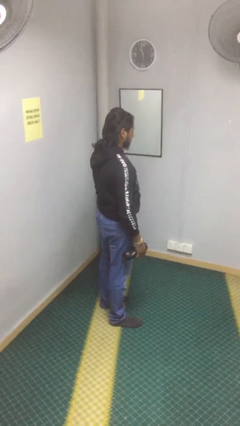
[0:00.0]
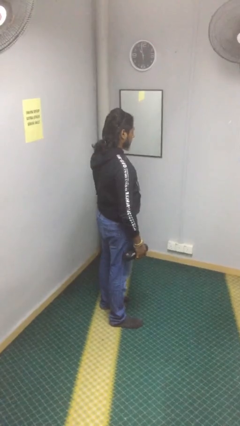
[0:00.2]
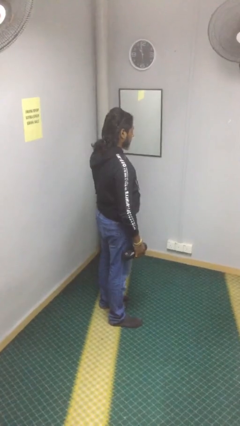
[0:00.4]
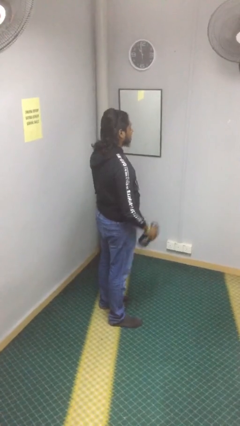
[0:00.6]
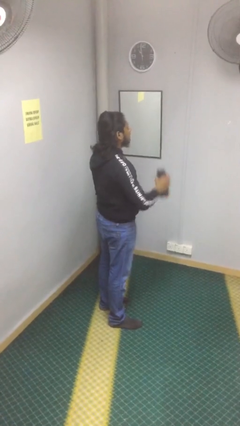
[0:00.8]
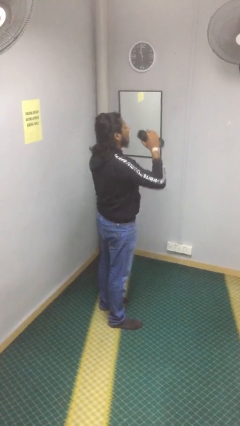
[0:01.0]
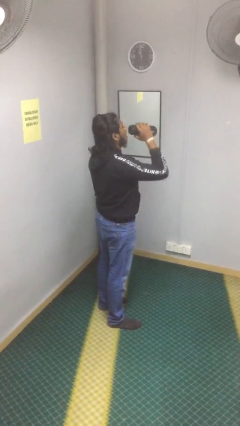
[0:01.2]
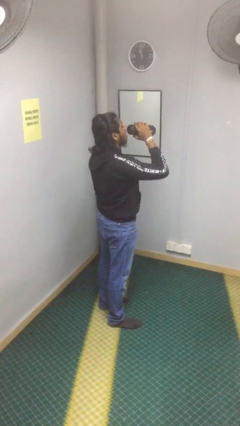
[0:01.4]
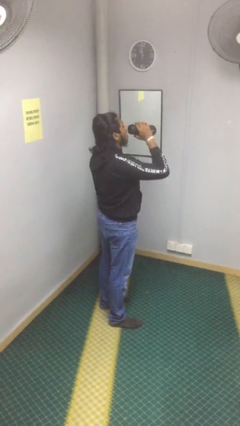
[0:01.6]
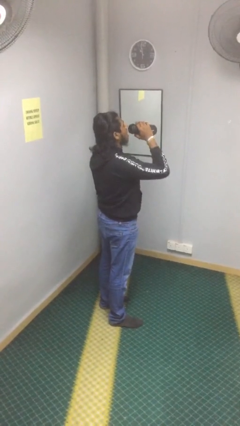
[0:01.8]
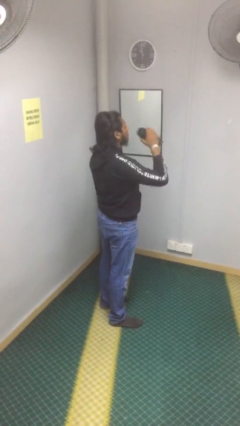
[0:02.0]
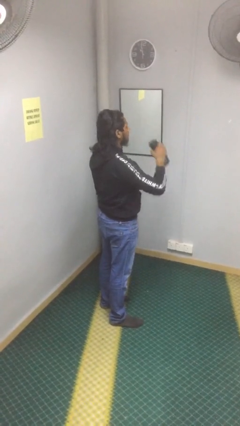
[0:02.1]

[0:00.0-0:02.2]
person drinks from bottle

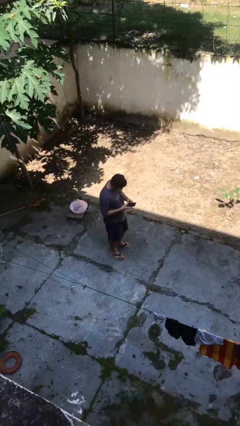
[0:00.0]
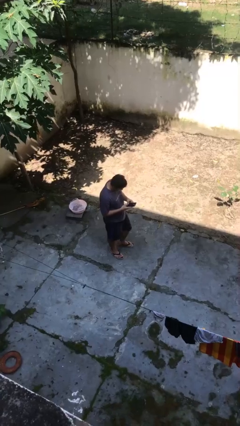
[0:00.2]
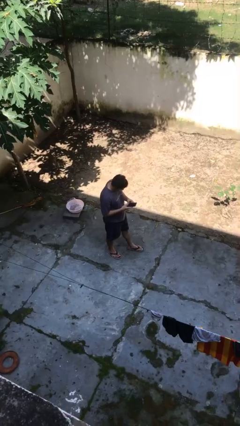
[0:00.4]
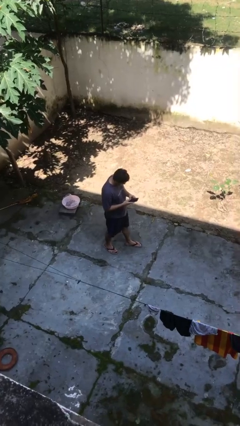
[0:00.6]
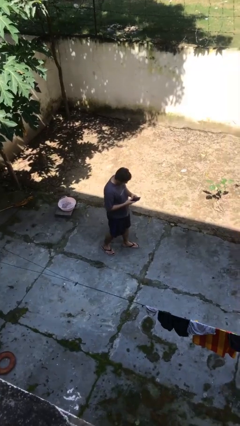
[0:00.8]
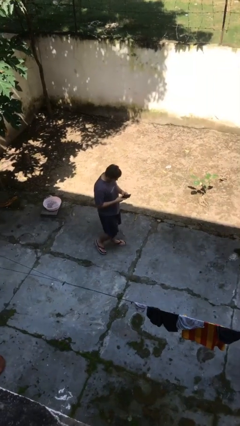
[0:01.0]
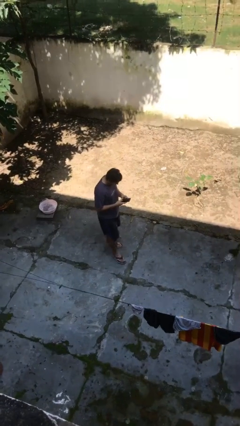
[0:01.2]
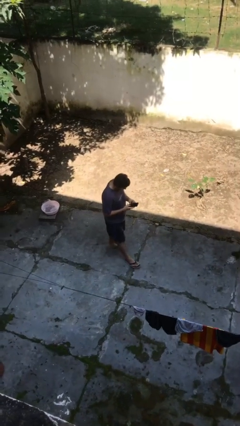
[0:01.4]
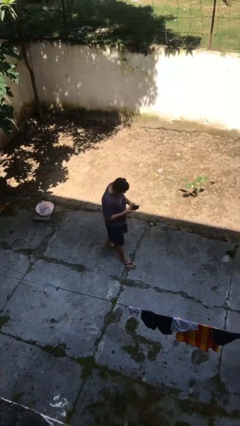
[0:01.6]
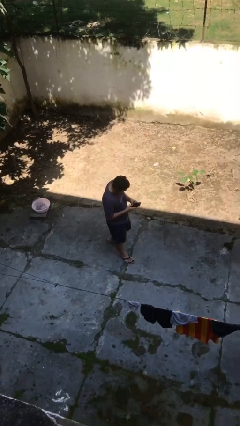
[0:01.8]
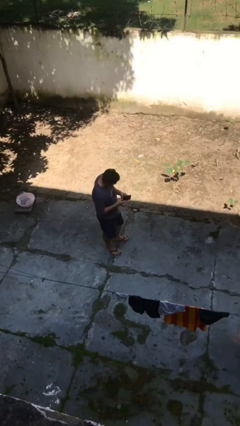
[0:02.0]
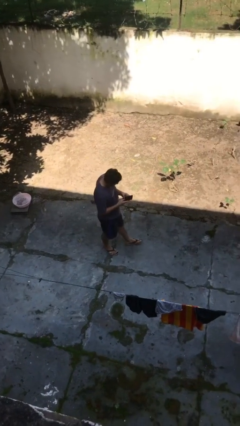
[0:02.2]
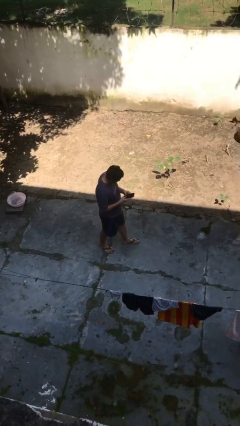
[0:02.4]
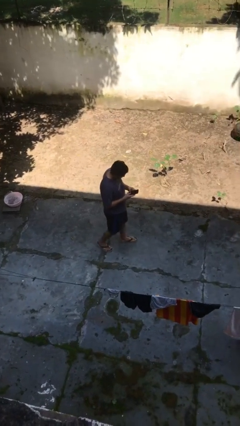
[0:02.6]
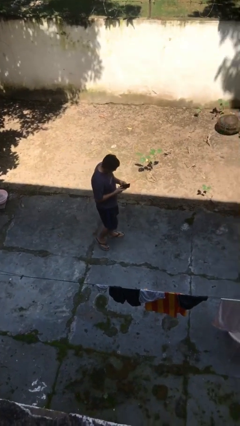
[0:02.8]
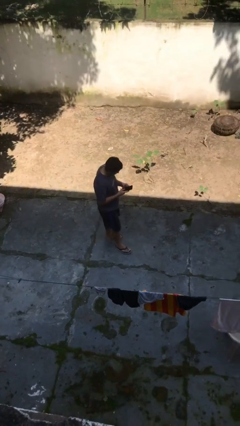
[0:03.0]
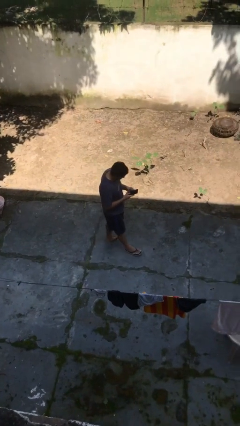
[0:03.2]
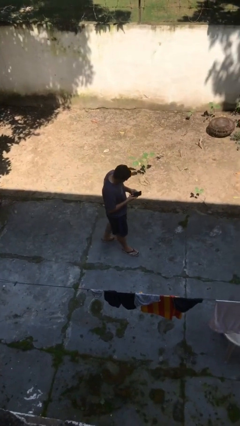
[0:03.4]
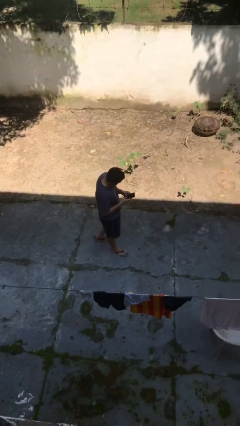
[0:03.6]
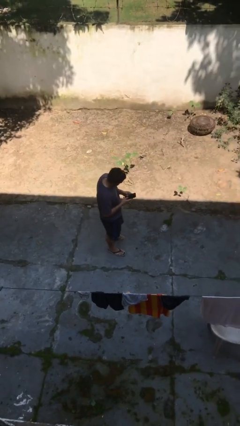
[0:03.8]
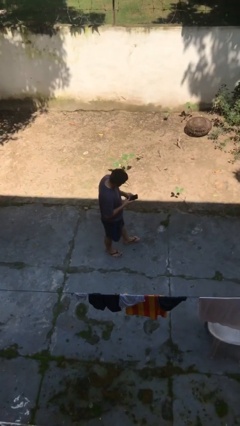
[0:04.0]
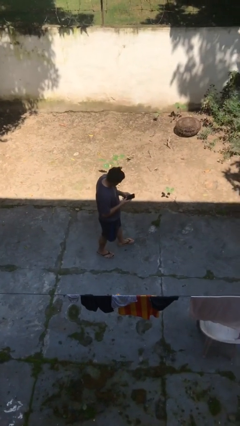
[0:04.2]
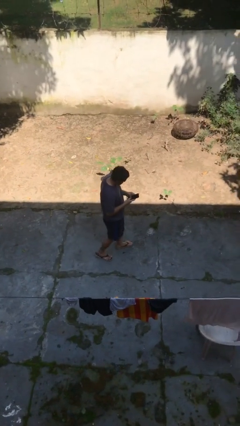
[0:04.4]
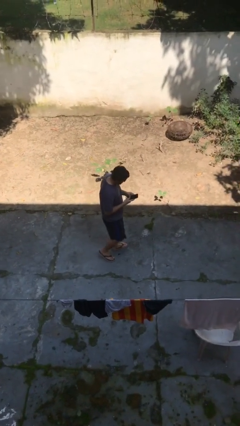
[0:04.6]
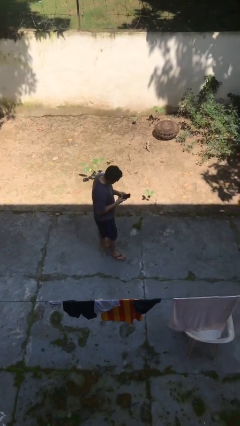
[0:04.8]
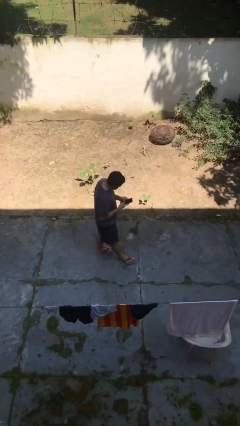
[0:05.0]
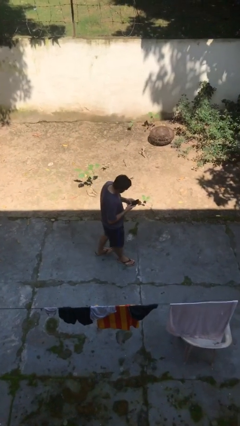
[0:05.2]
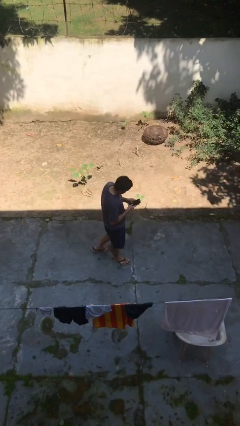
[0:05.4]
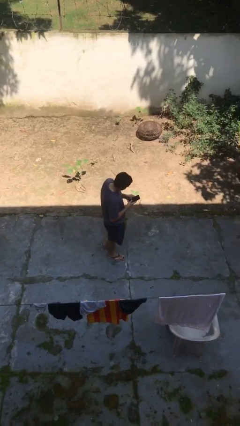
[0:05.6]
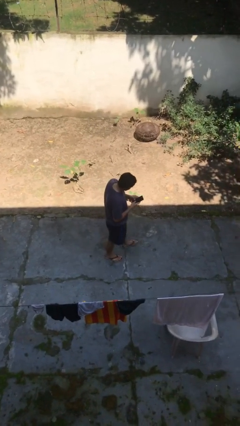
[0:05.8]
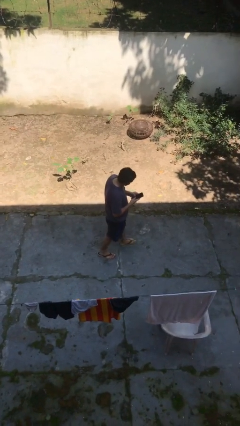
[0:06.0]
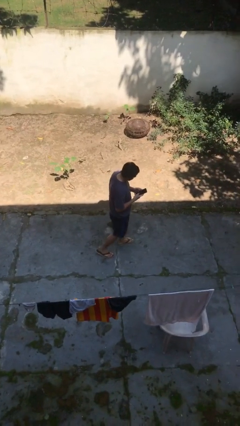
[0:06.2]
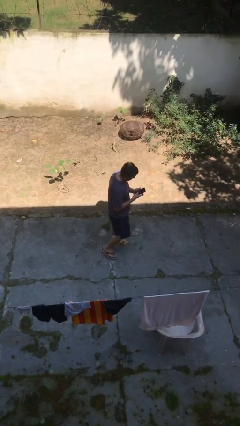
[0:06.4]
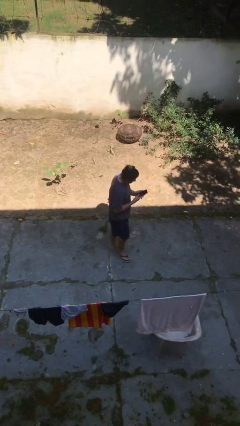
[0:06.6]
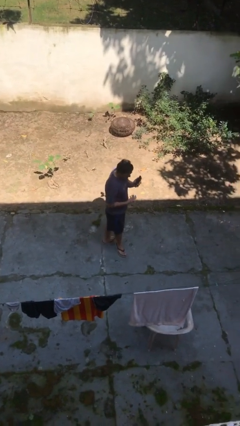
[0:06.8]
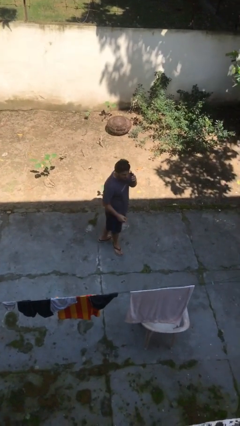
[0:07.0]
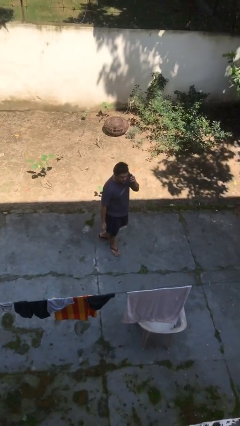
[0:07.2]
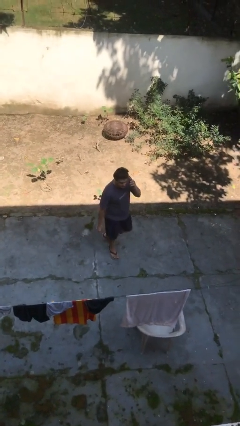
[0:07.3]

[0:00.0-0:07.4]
person texts on phone

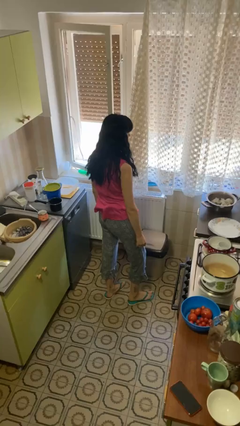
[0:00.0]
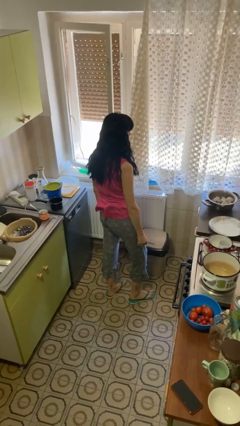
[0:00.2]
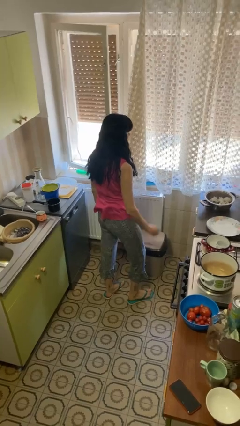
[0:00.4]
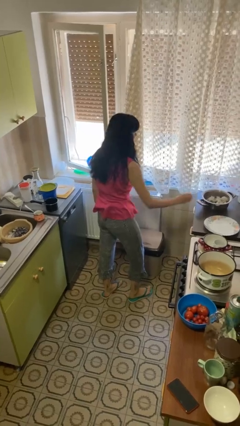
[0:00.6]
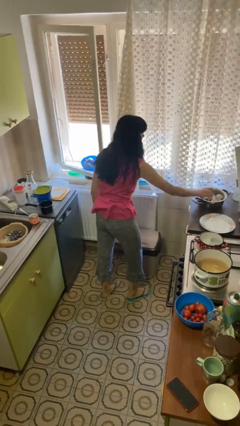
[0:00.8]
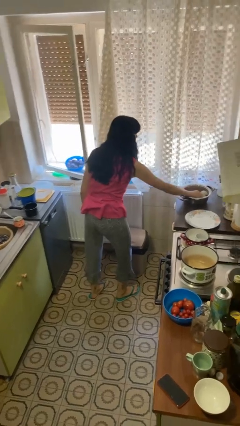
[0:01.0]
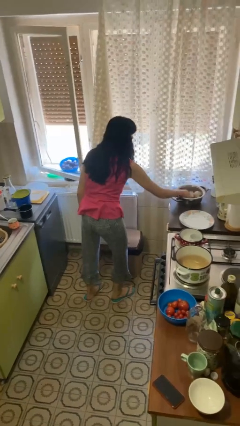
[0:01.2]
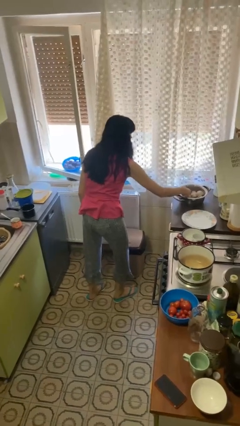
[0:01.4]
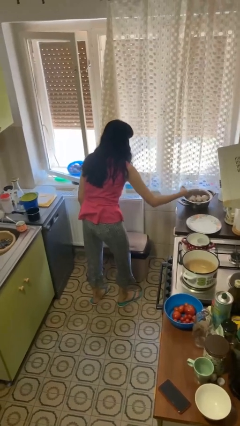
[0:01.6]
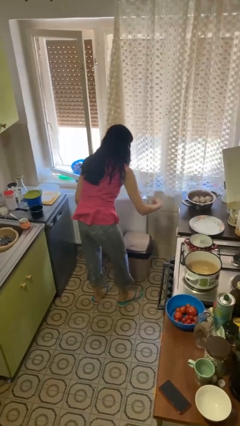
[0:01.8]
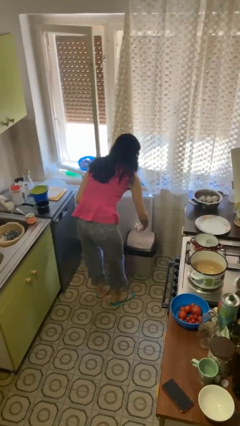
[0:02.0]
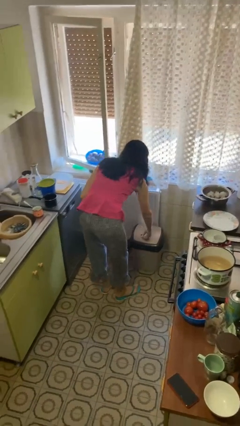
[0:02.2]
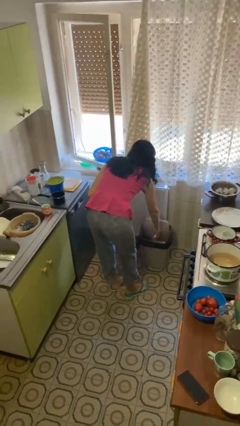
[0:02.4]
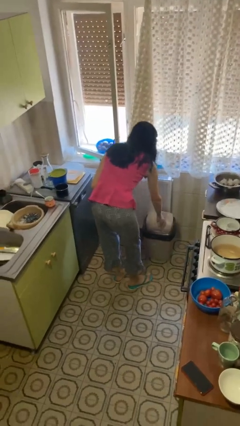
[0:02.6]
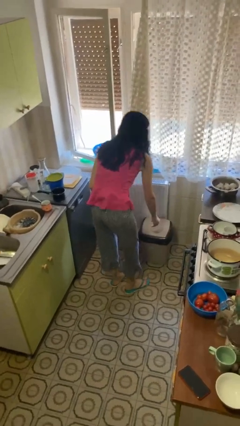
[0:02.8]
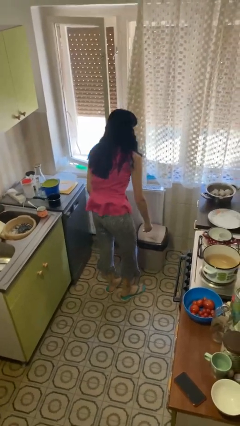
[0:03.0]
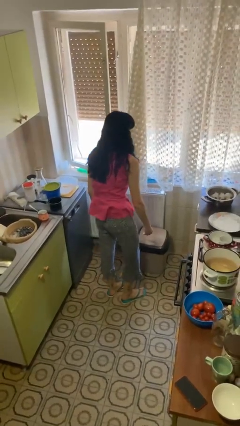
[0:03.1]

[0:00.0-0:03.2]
person discards trash

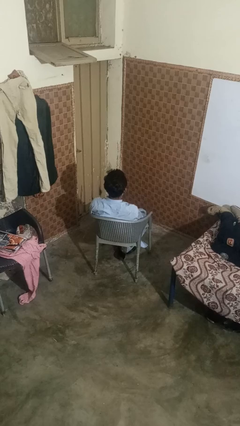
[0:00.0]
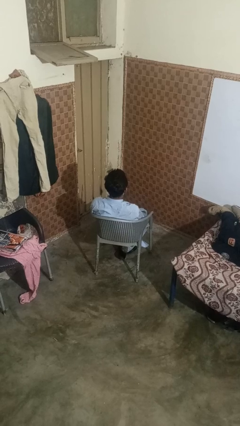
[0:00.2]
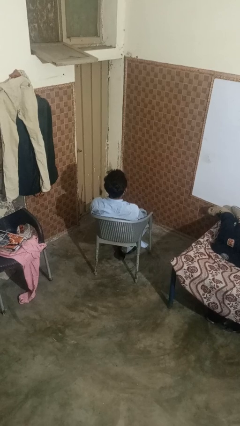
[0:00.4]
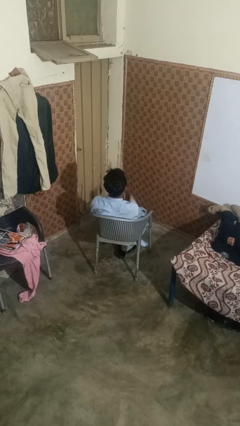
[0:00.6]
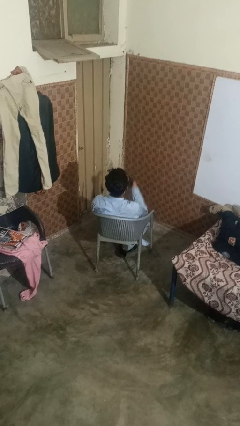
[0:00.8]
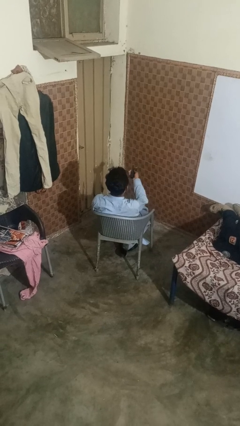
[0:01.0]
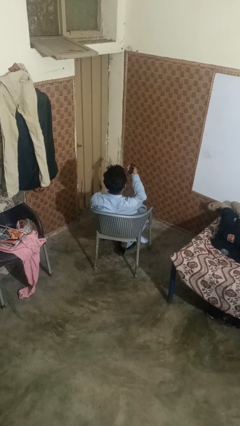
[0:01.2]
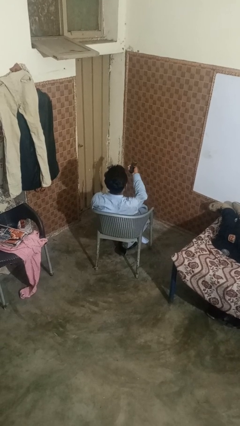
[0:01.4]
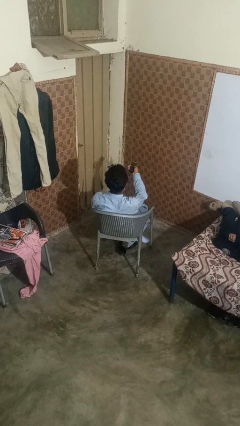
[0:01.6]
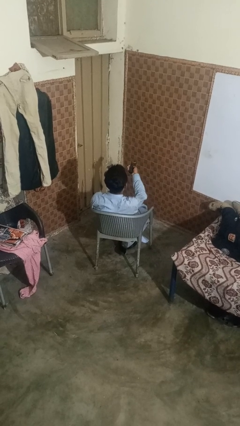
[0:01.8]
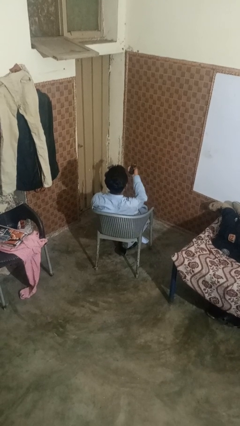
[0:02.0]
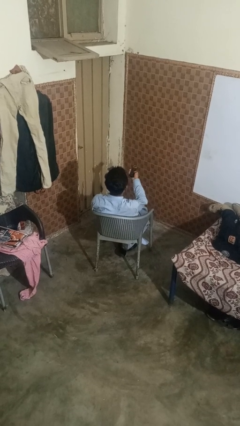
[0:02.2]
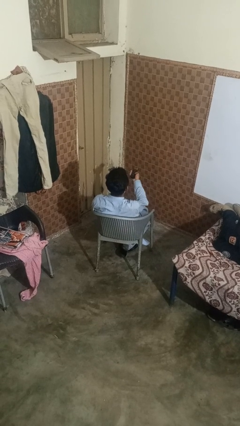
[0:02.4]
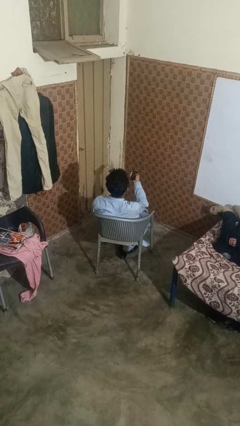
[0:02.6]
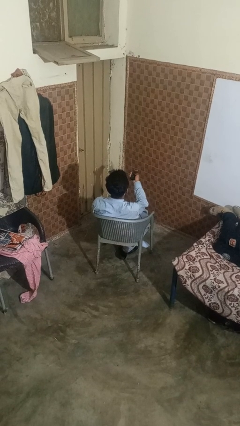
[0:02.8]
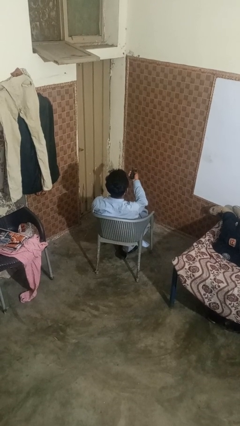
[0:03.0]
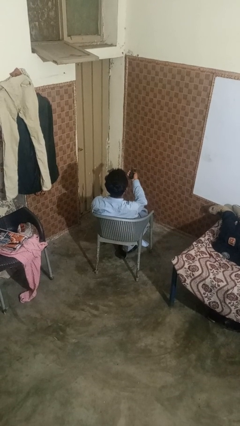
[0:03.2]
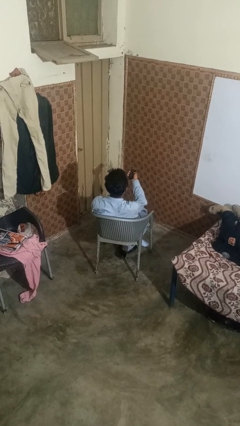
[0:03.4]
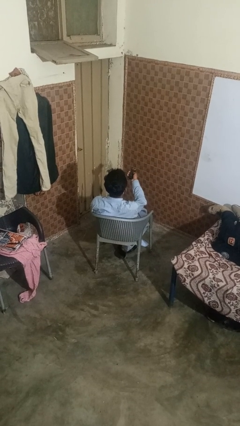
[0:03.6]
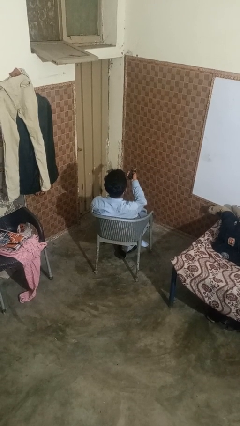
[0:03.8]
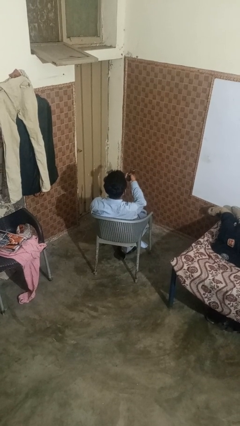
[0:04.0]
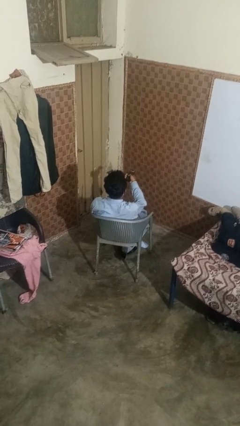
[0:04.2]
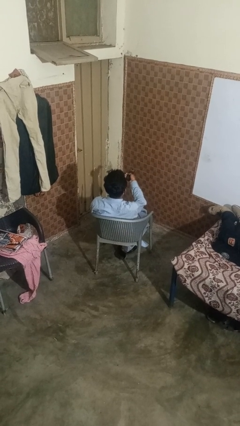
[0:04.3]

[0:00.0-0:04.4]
person uses television remote

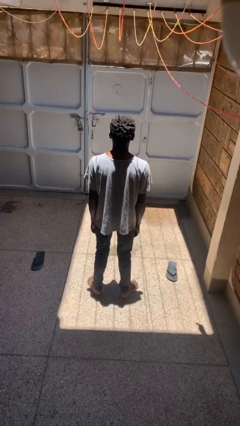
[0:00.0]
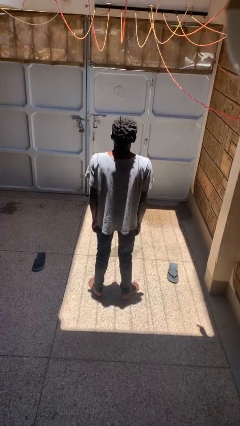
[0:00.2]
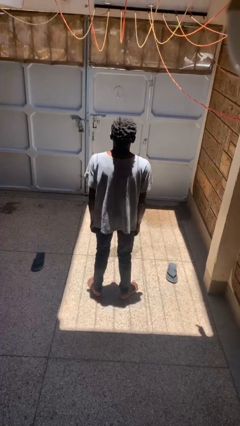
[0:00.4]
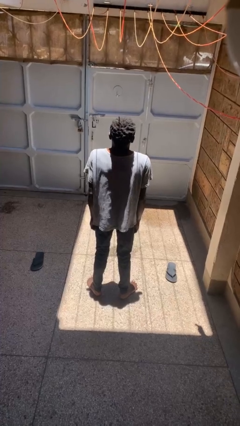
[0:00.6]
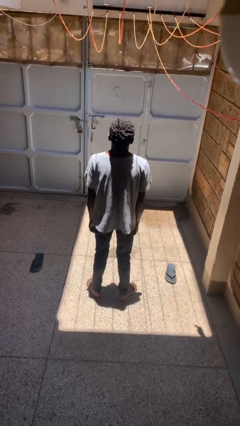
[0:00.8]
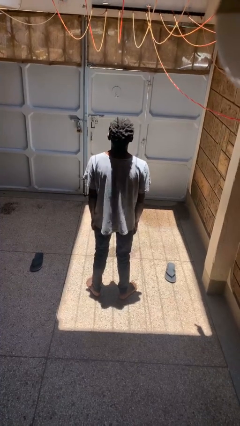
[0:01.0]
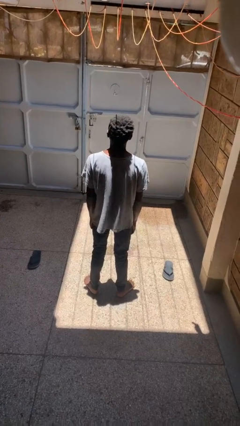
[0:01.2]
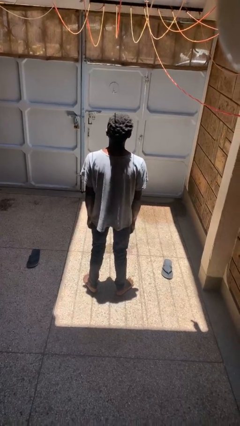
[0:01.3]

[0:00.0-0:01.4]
person shrugs
